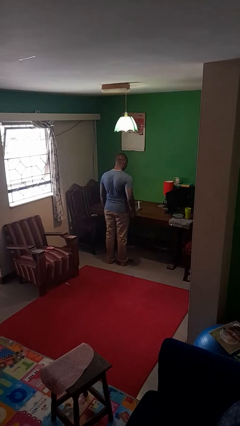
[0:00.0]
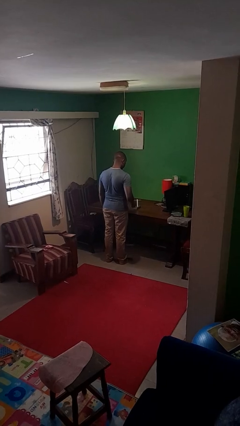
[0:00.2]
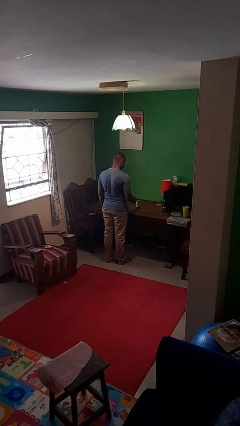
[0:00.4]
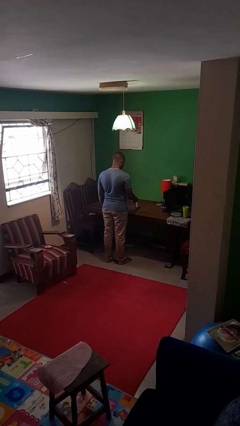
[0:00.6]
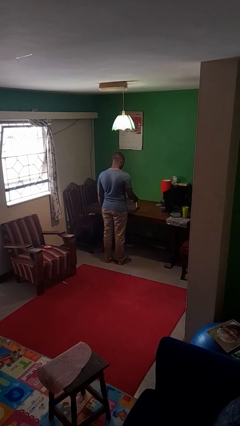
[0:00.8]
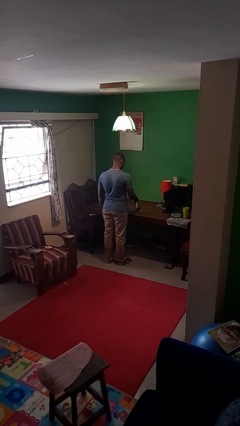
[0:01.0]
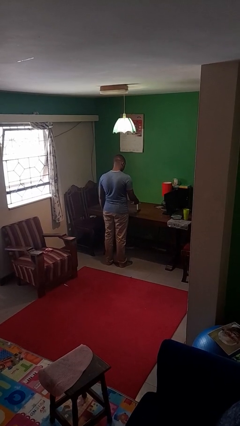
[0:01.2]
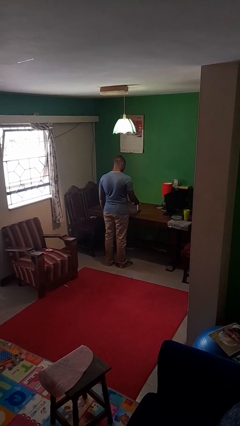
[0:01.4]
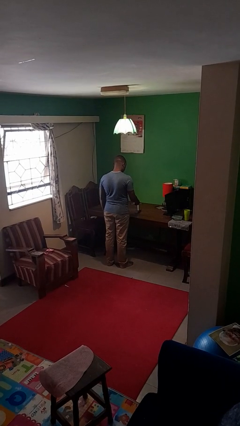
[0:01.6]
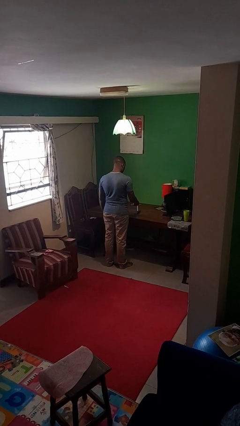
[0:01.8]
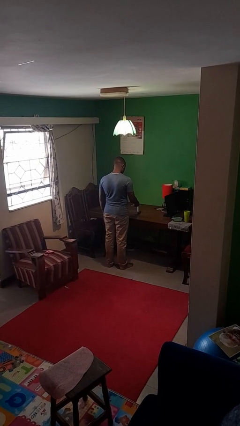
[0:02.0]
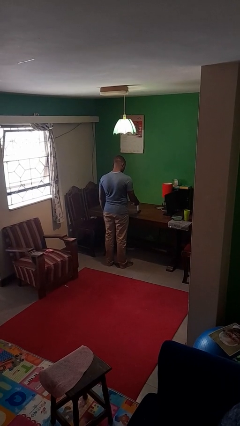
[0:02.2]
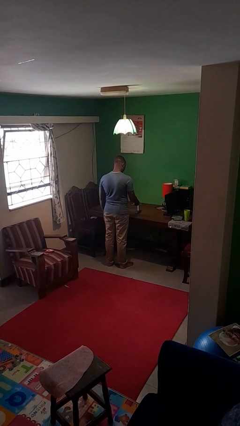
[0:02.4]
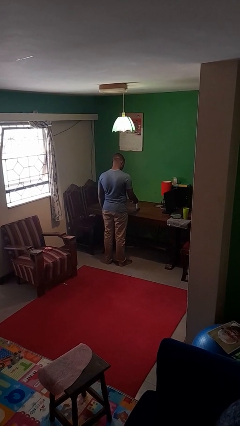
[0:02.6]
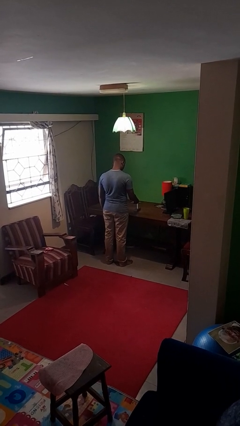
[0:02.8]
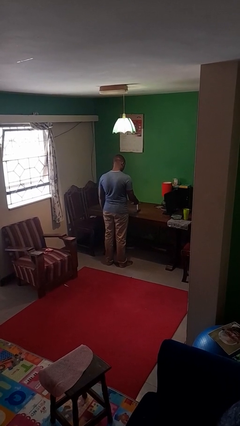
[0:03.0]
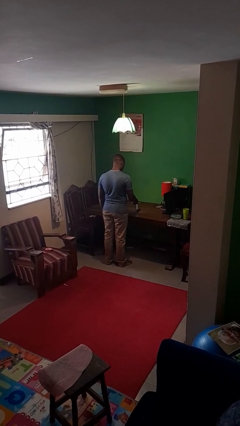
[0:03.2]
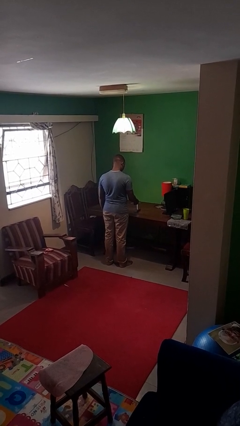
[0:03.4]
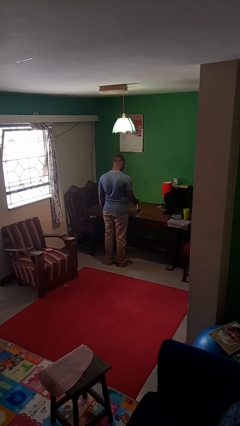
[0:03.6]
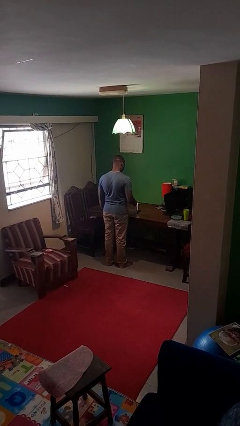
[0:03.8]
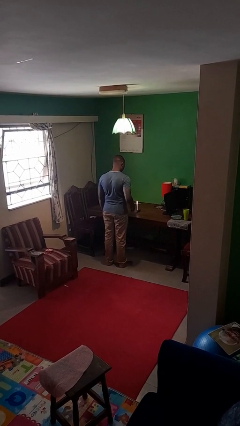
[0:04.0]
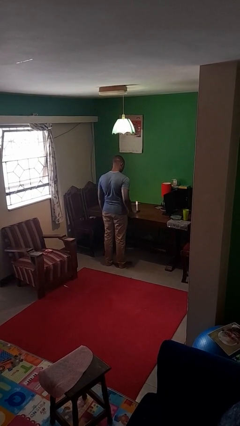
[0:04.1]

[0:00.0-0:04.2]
person lights candle

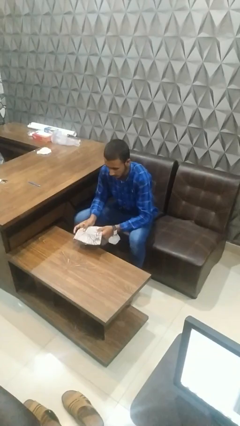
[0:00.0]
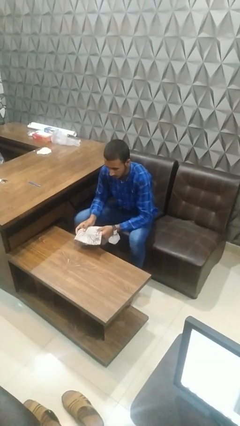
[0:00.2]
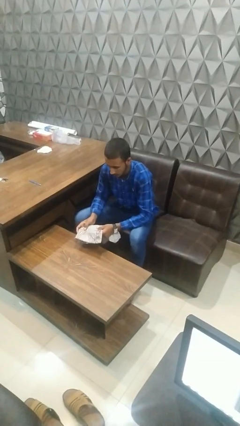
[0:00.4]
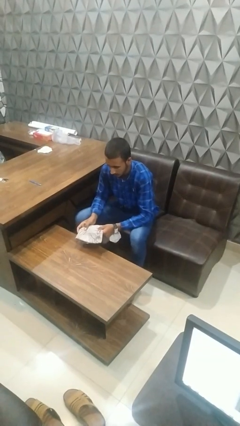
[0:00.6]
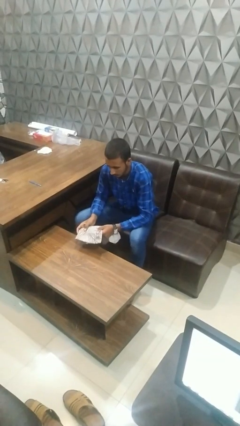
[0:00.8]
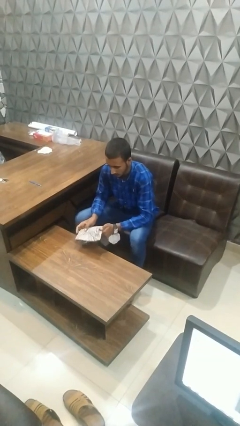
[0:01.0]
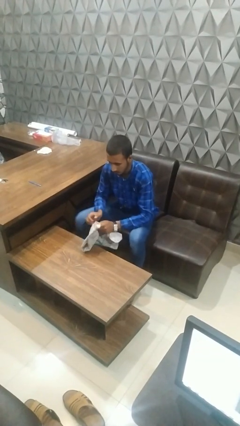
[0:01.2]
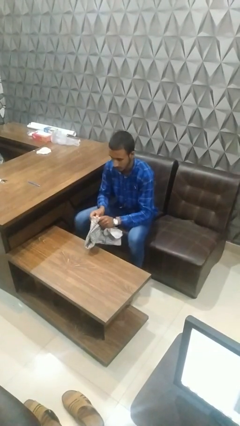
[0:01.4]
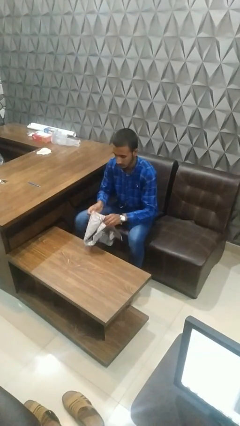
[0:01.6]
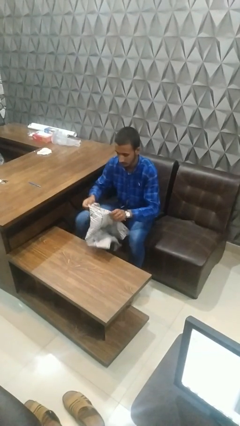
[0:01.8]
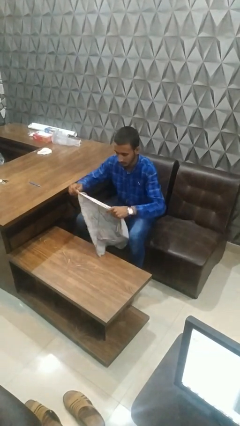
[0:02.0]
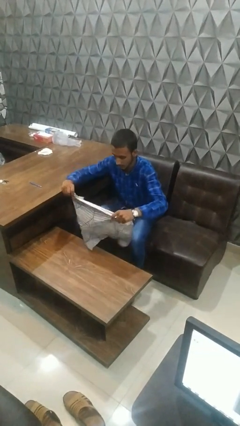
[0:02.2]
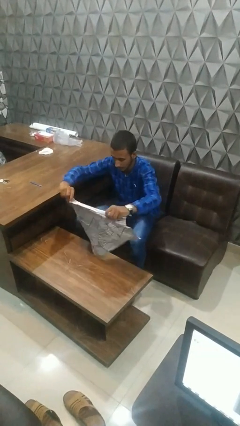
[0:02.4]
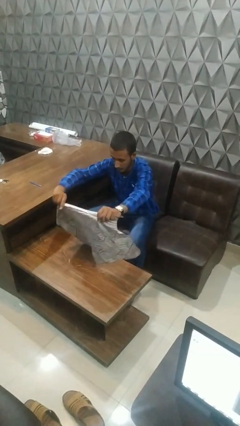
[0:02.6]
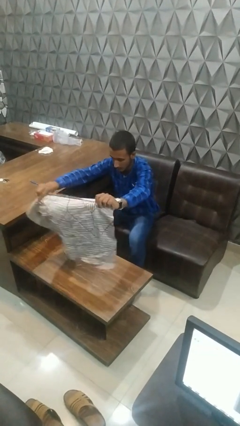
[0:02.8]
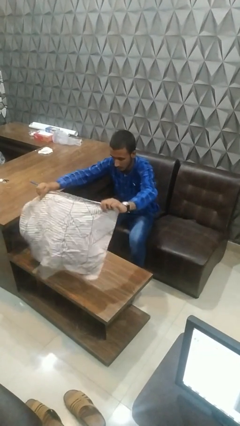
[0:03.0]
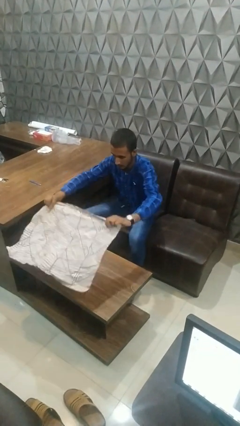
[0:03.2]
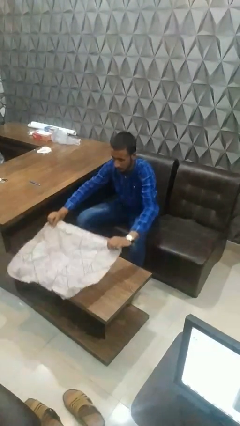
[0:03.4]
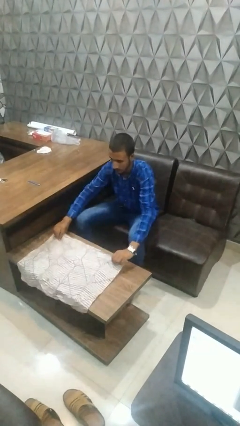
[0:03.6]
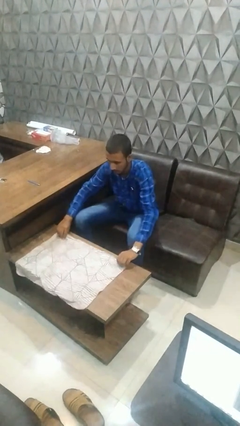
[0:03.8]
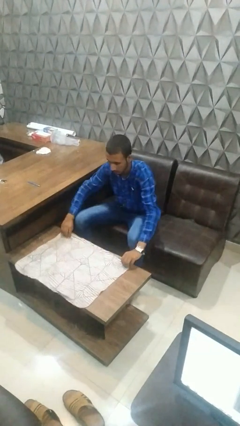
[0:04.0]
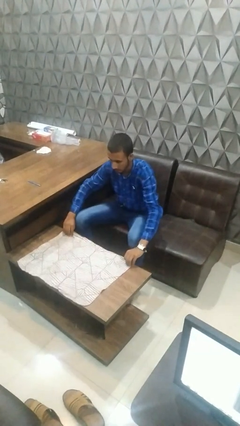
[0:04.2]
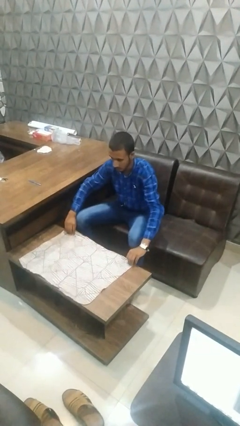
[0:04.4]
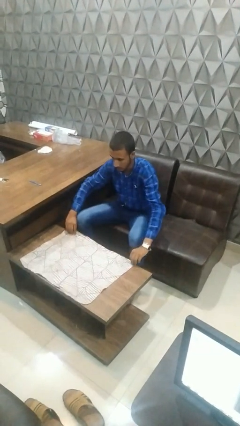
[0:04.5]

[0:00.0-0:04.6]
person spreads tablecloth

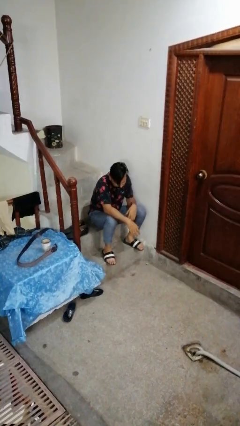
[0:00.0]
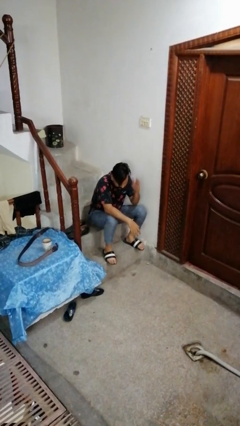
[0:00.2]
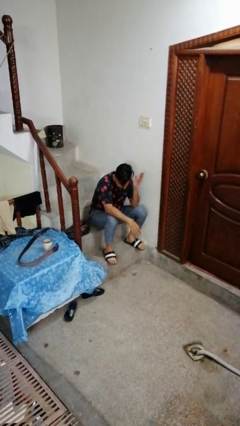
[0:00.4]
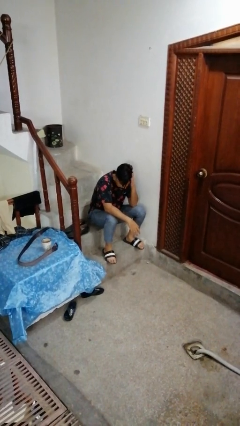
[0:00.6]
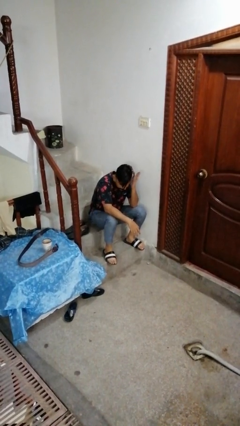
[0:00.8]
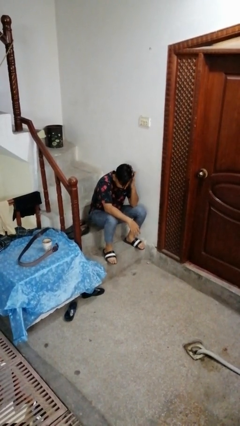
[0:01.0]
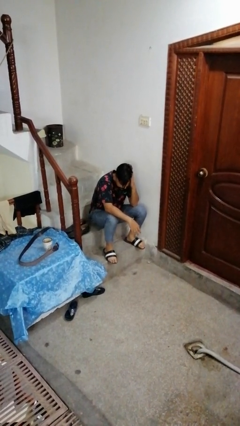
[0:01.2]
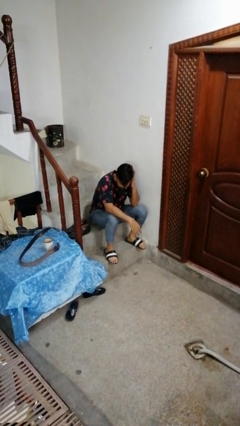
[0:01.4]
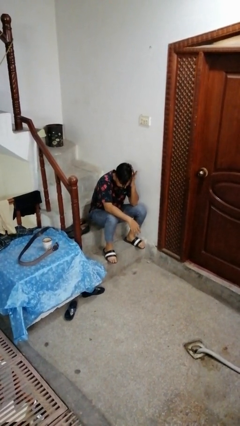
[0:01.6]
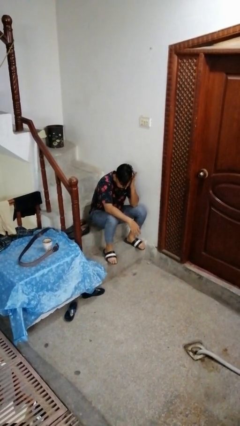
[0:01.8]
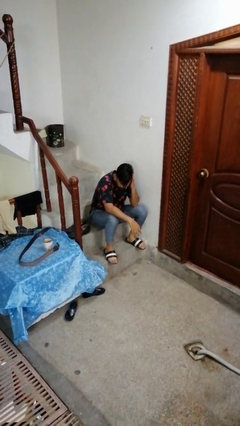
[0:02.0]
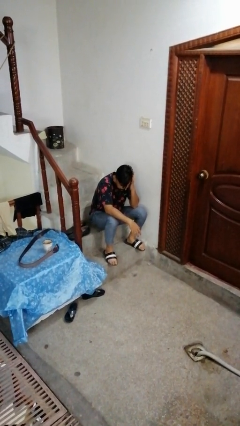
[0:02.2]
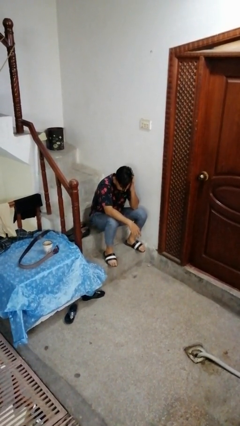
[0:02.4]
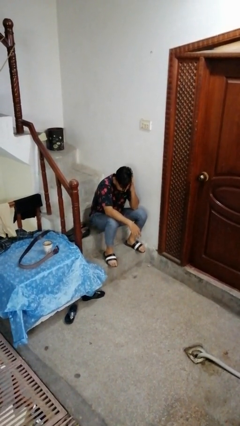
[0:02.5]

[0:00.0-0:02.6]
person strokes hair

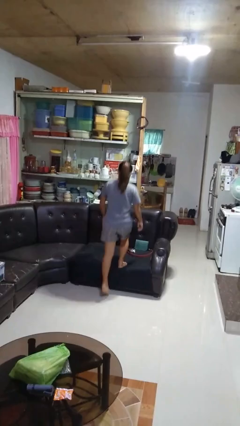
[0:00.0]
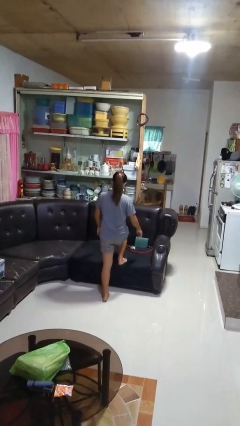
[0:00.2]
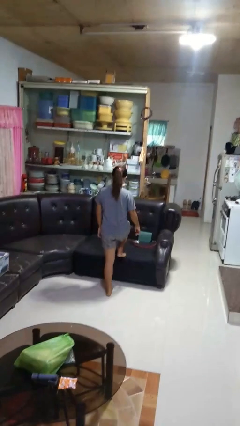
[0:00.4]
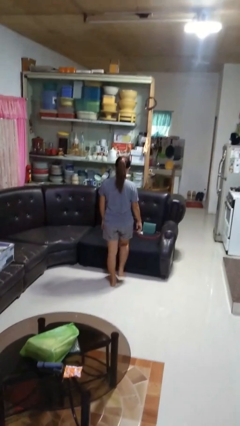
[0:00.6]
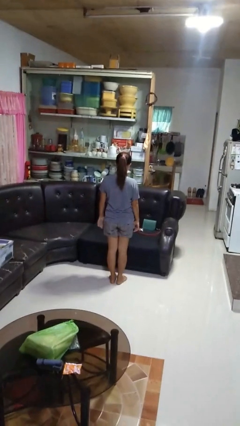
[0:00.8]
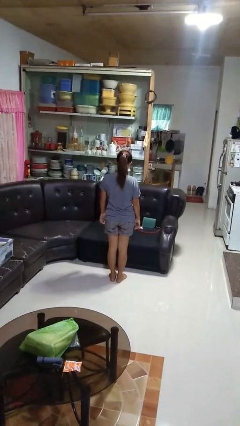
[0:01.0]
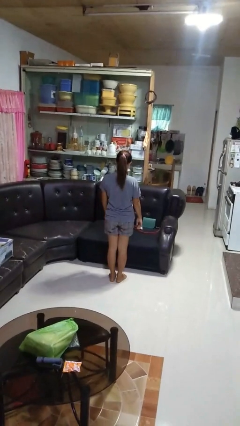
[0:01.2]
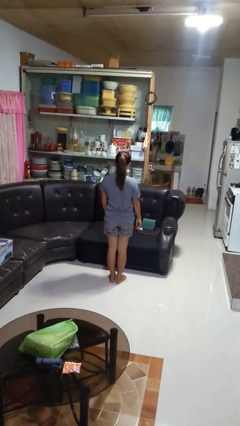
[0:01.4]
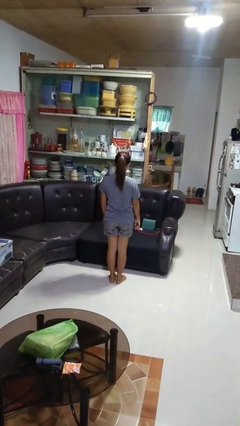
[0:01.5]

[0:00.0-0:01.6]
person climbs off couch

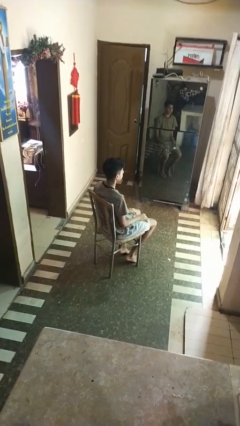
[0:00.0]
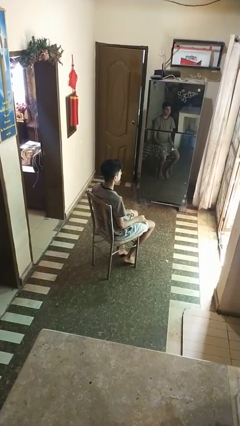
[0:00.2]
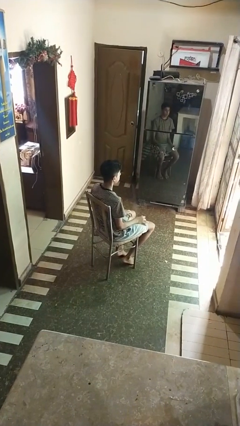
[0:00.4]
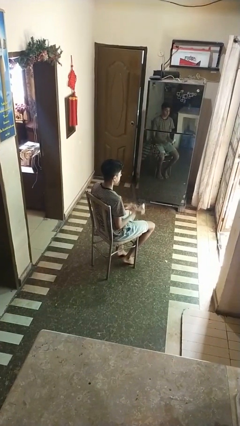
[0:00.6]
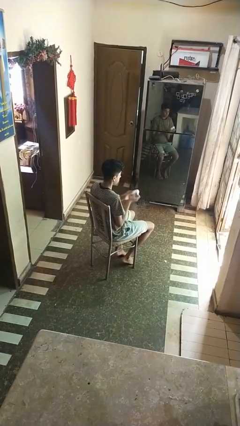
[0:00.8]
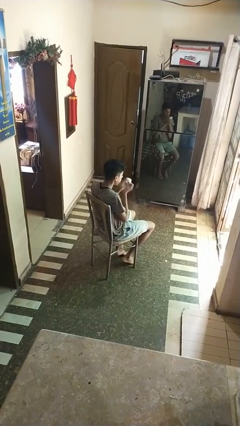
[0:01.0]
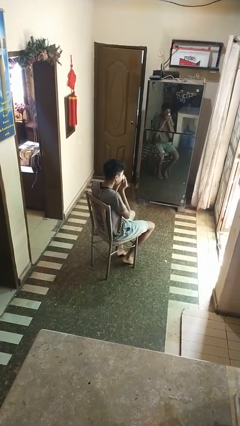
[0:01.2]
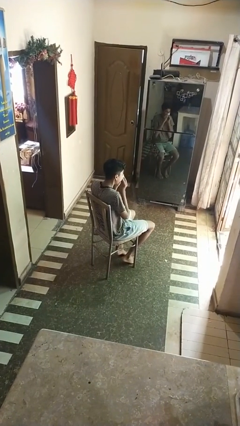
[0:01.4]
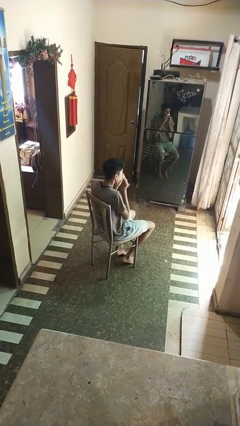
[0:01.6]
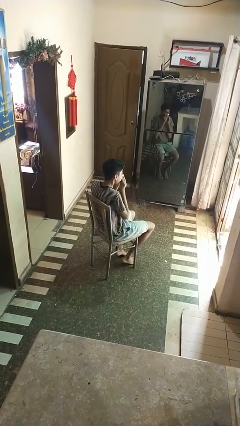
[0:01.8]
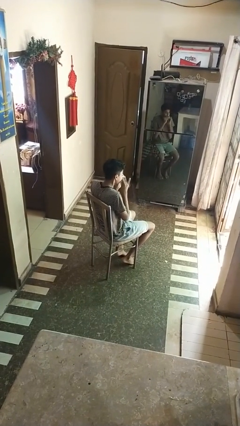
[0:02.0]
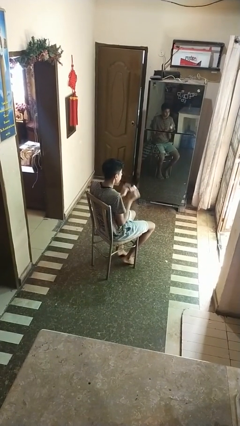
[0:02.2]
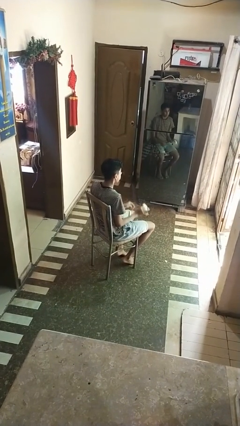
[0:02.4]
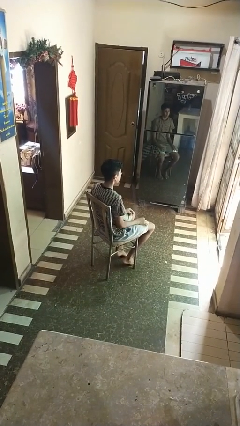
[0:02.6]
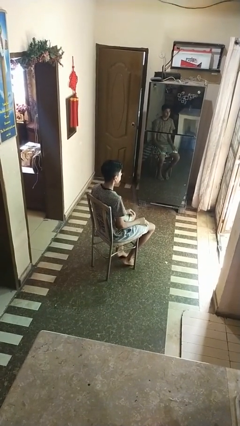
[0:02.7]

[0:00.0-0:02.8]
person blows nose

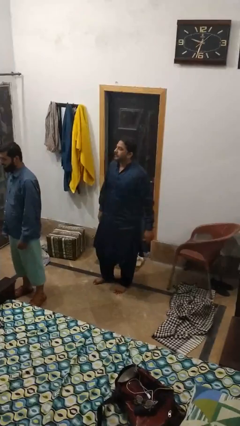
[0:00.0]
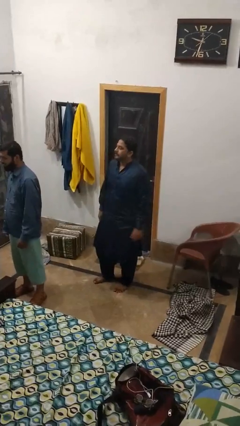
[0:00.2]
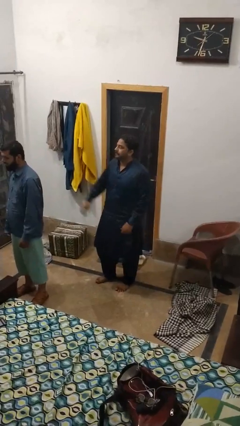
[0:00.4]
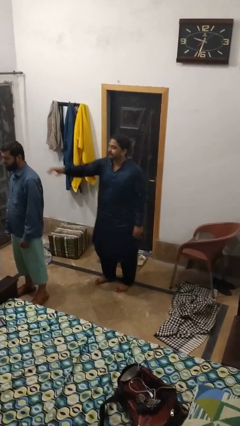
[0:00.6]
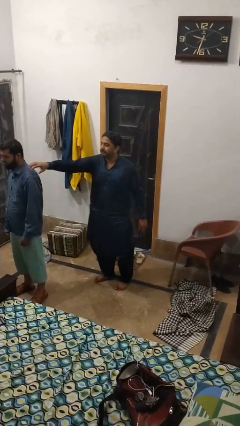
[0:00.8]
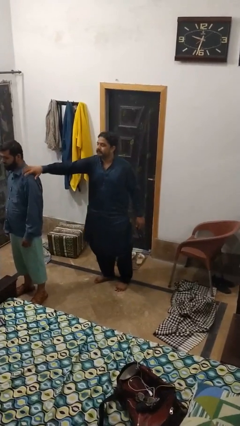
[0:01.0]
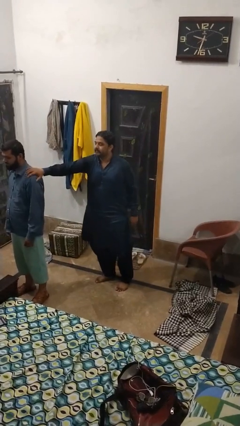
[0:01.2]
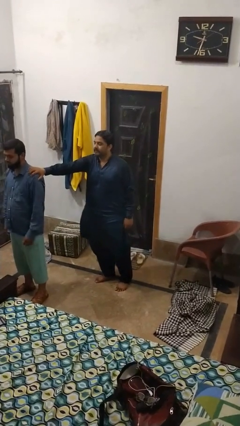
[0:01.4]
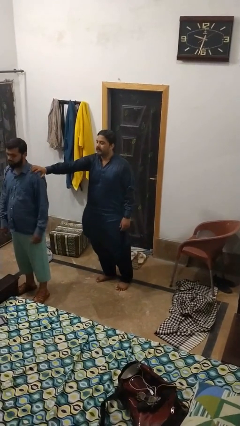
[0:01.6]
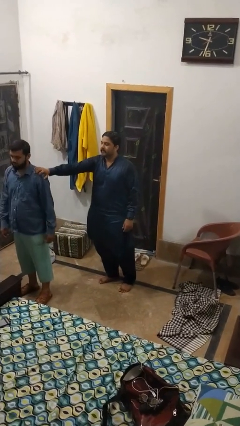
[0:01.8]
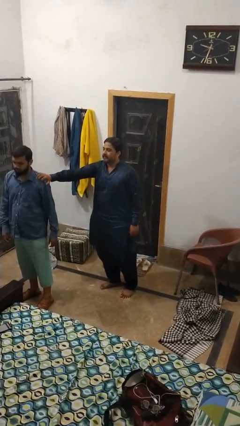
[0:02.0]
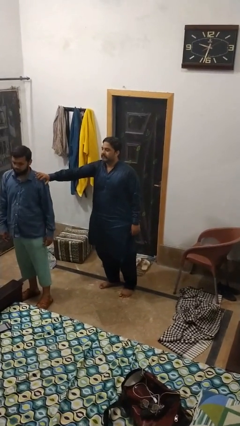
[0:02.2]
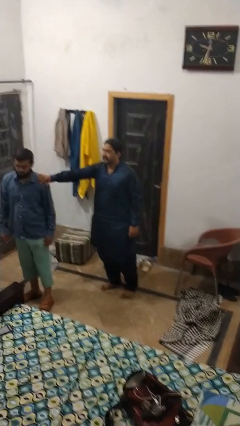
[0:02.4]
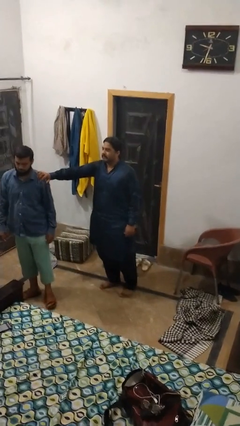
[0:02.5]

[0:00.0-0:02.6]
person grabs person by shoulder
